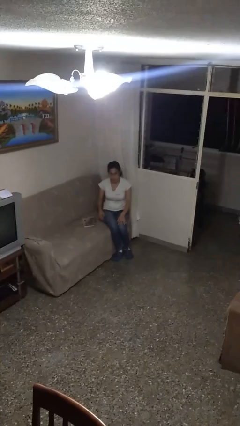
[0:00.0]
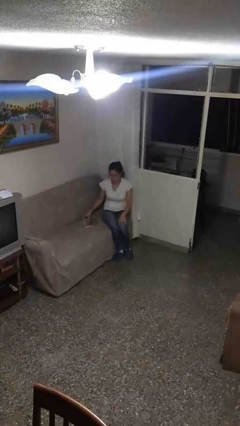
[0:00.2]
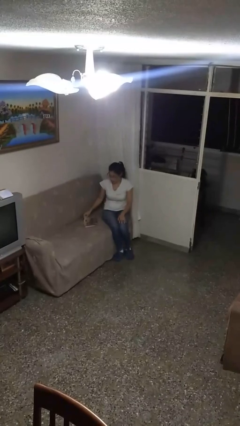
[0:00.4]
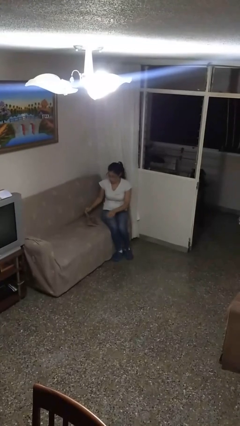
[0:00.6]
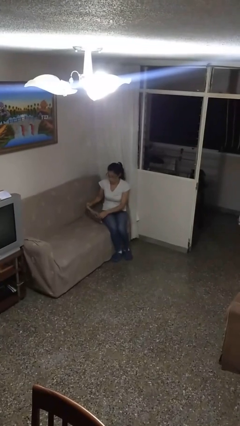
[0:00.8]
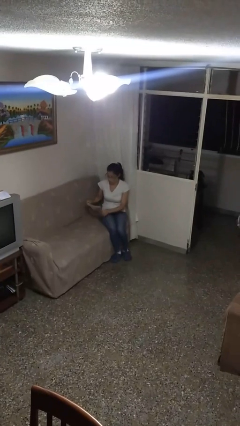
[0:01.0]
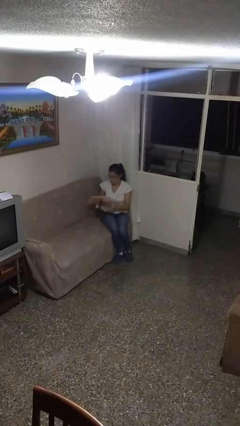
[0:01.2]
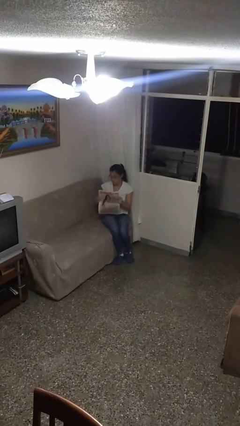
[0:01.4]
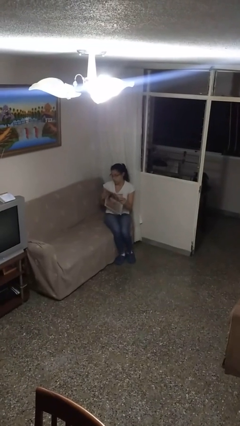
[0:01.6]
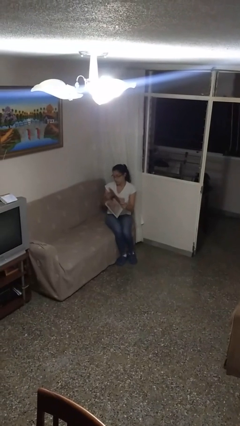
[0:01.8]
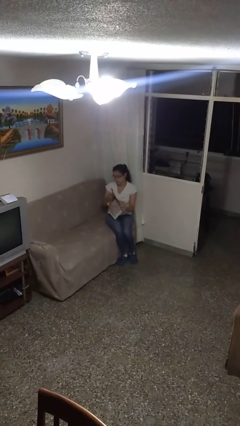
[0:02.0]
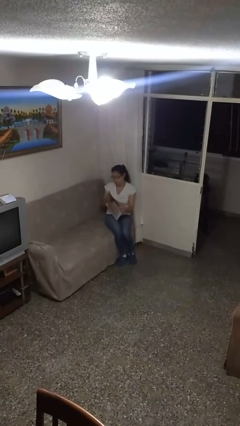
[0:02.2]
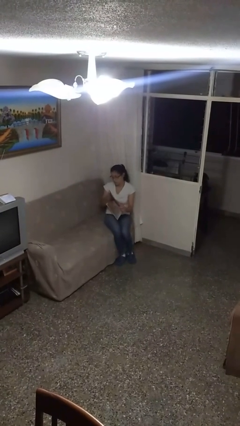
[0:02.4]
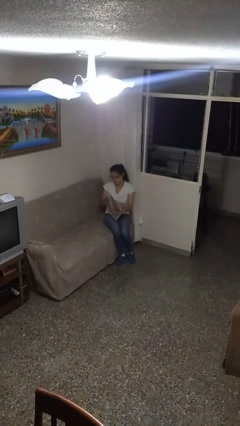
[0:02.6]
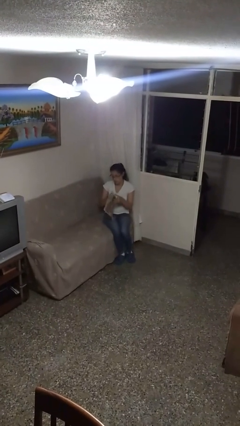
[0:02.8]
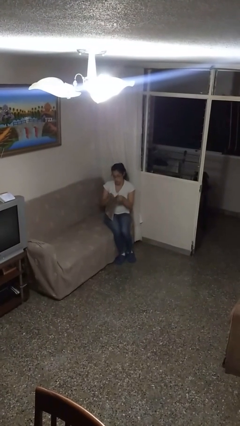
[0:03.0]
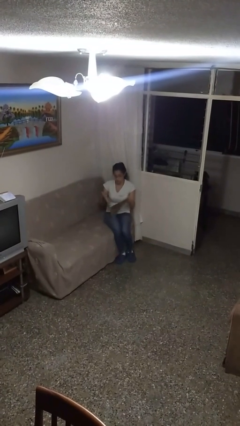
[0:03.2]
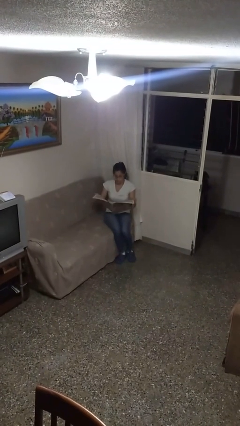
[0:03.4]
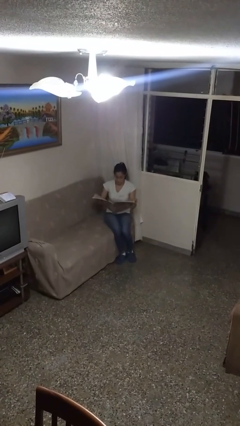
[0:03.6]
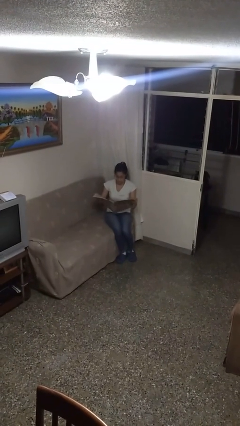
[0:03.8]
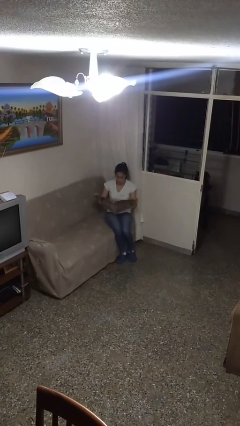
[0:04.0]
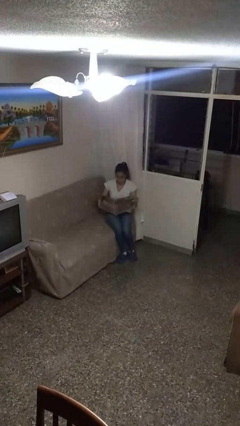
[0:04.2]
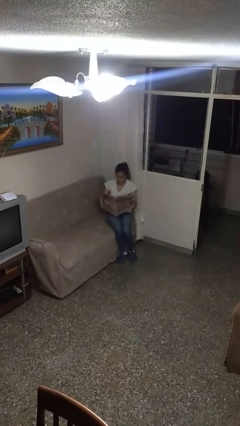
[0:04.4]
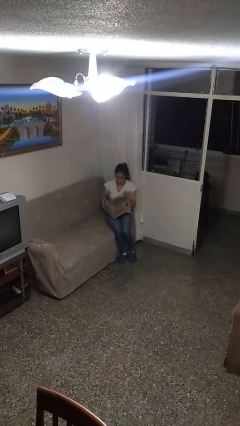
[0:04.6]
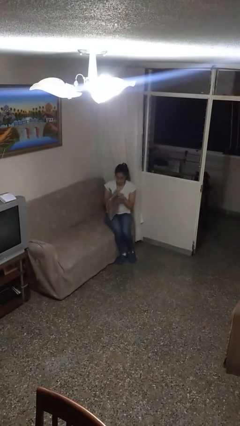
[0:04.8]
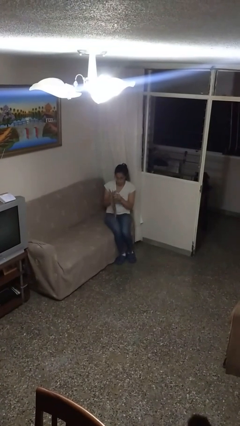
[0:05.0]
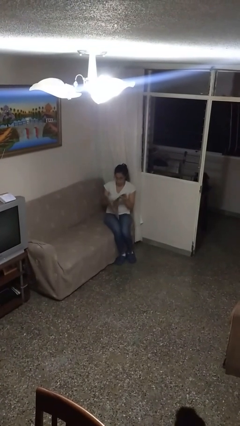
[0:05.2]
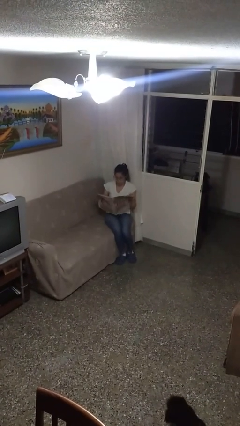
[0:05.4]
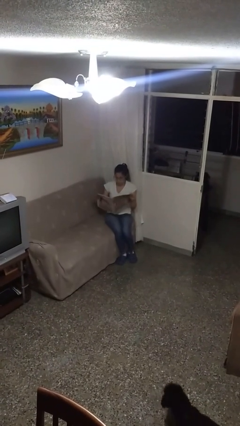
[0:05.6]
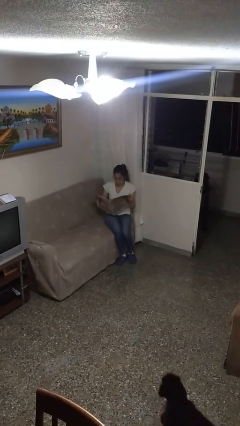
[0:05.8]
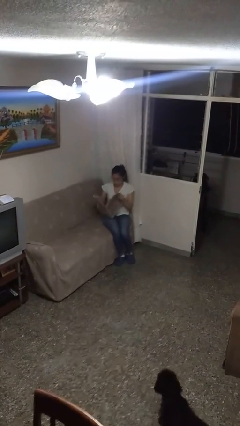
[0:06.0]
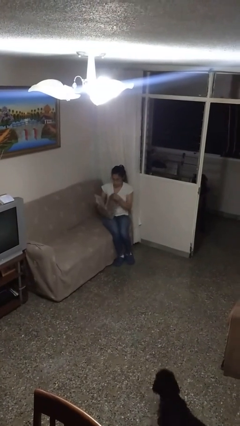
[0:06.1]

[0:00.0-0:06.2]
person reads newspaper

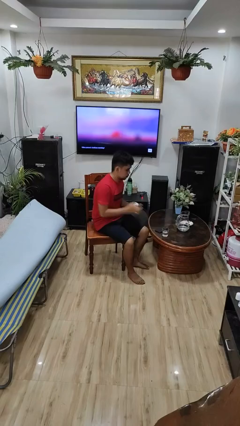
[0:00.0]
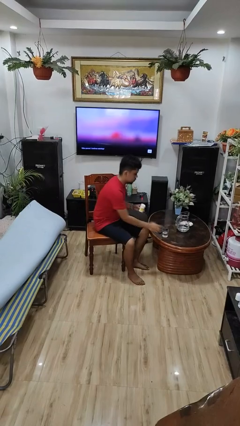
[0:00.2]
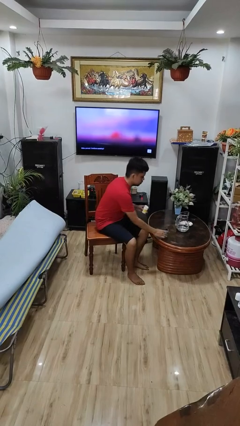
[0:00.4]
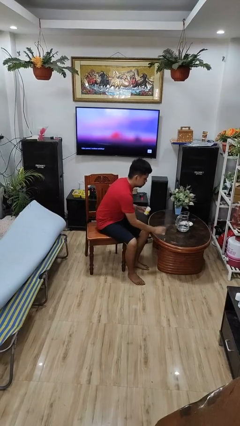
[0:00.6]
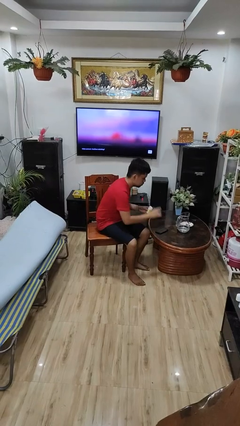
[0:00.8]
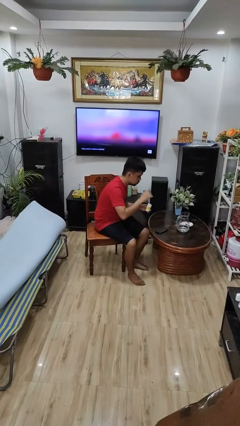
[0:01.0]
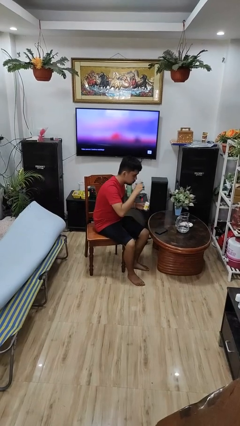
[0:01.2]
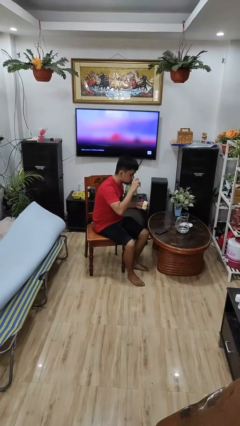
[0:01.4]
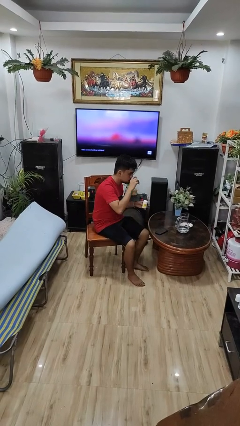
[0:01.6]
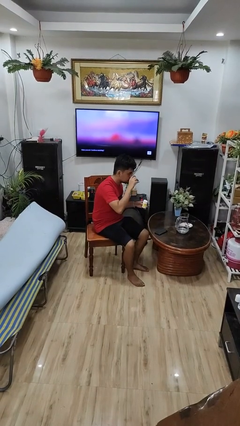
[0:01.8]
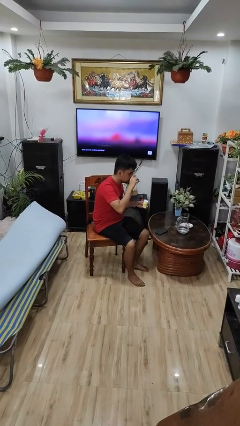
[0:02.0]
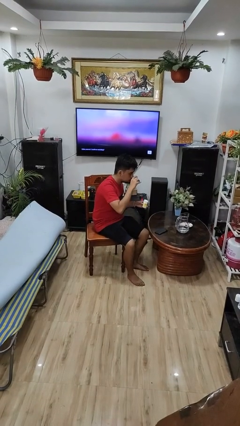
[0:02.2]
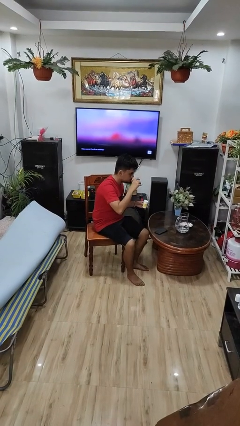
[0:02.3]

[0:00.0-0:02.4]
person drinks from cup

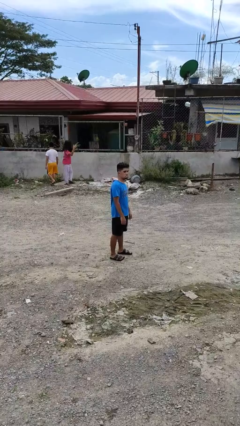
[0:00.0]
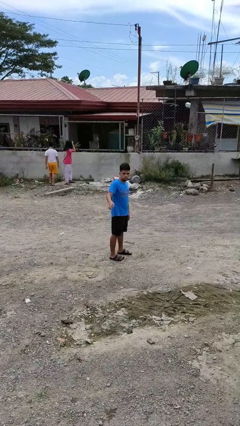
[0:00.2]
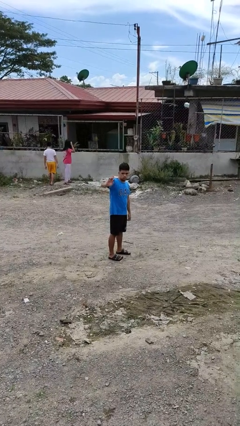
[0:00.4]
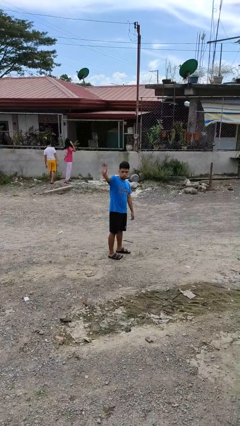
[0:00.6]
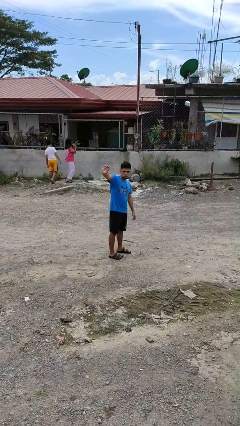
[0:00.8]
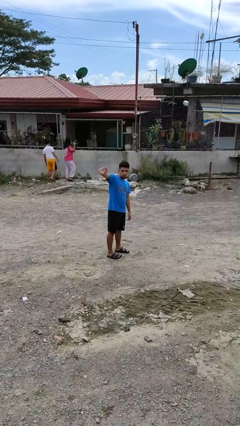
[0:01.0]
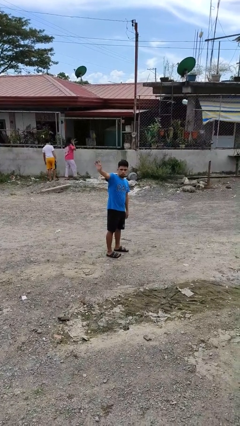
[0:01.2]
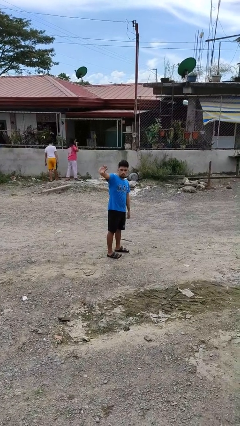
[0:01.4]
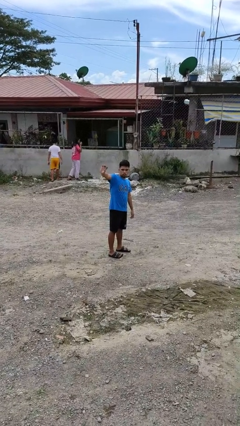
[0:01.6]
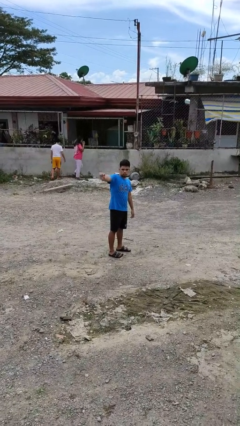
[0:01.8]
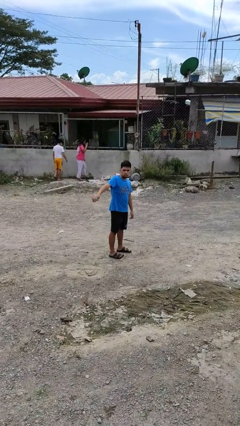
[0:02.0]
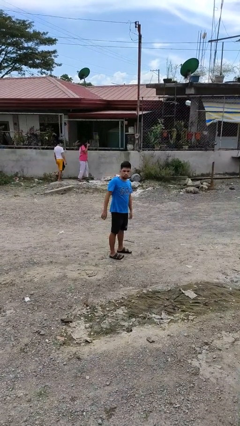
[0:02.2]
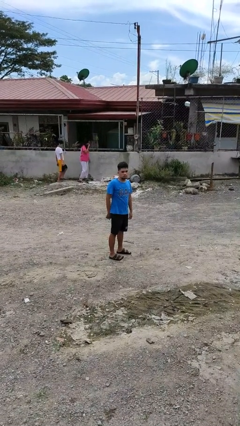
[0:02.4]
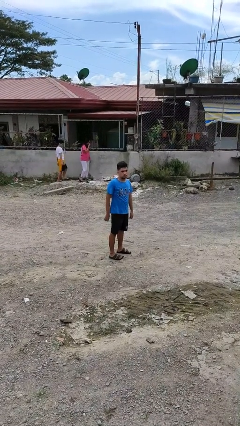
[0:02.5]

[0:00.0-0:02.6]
person waves at person

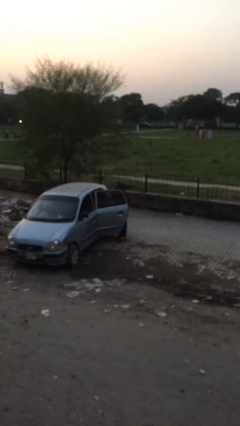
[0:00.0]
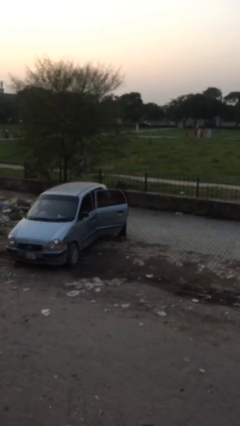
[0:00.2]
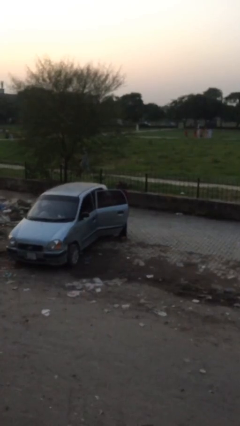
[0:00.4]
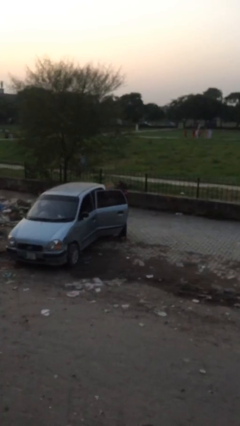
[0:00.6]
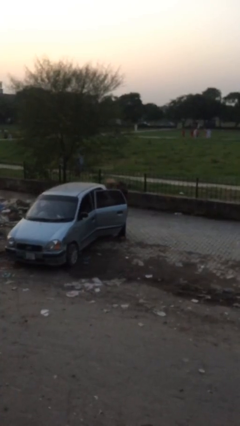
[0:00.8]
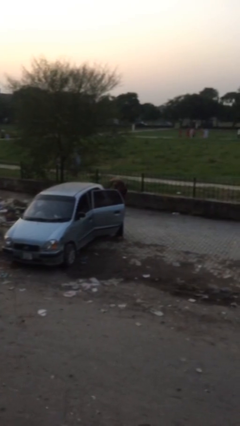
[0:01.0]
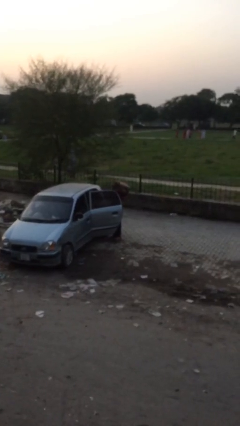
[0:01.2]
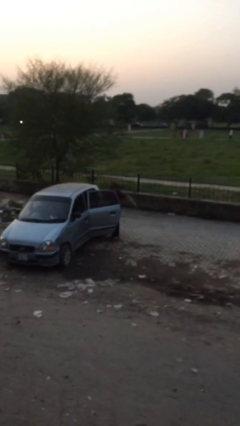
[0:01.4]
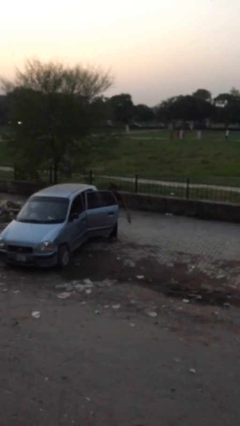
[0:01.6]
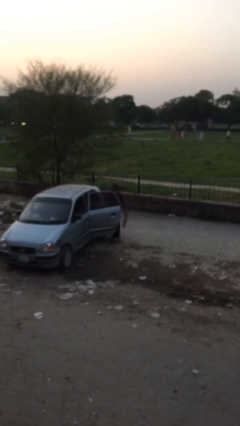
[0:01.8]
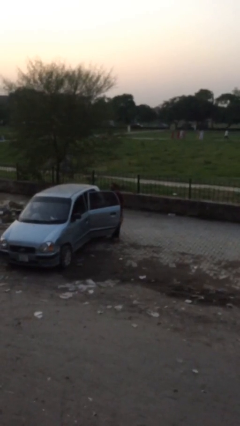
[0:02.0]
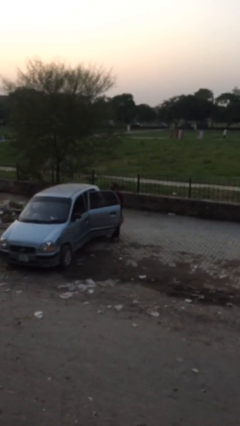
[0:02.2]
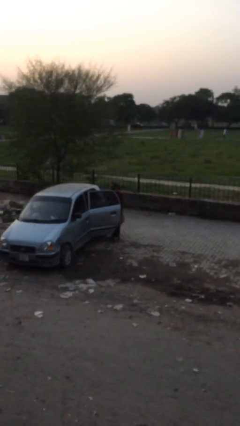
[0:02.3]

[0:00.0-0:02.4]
person unloads car

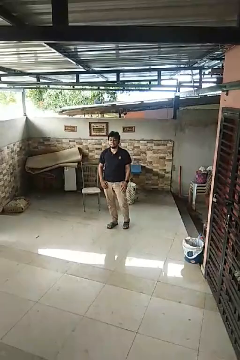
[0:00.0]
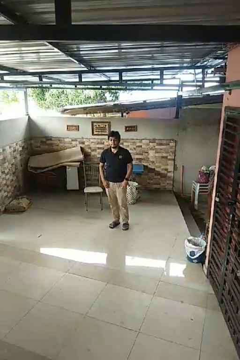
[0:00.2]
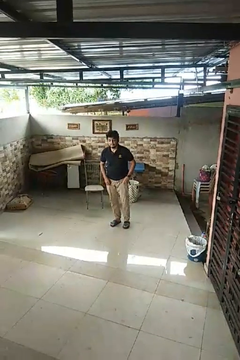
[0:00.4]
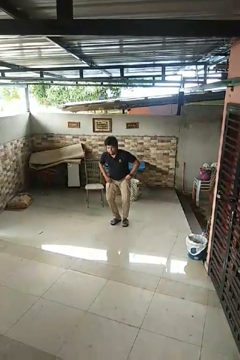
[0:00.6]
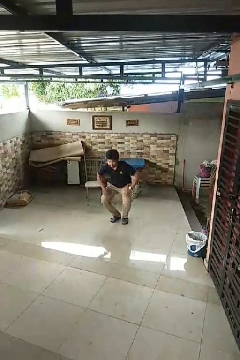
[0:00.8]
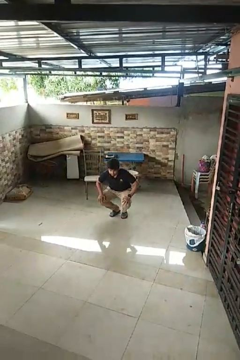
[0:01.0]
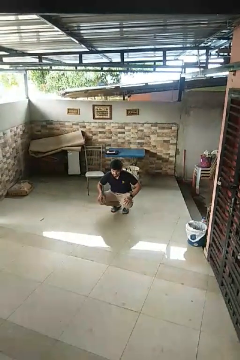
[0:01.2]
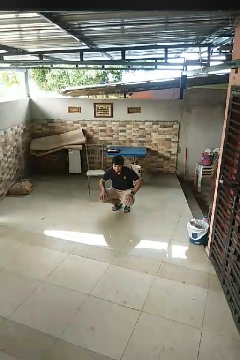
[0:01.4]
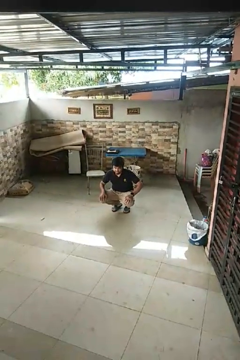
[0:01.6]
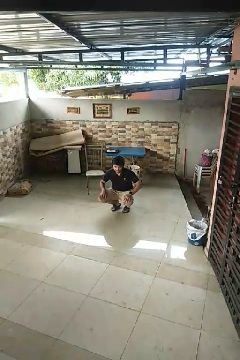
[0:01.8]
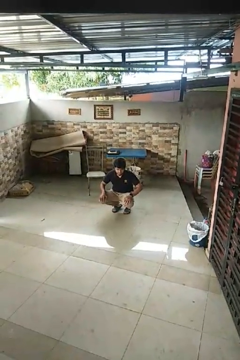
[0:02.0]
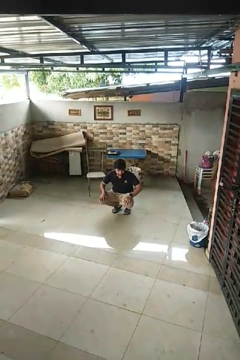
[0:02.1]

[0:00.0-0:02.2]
person squats

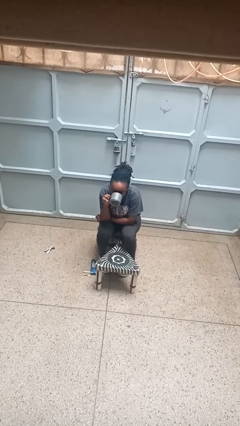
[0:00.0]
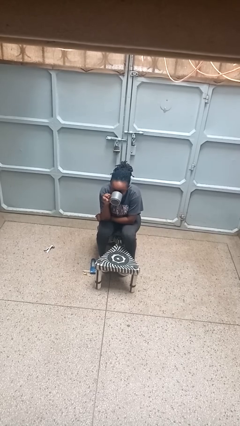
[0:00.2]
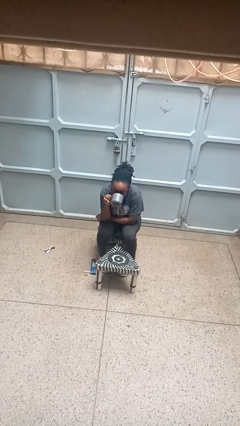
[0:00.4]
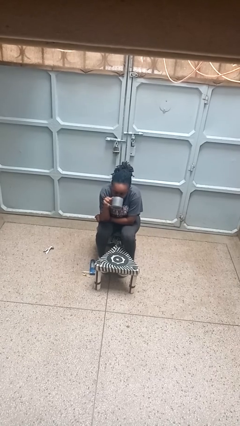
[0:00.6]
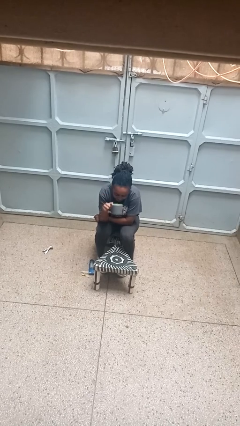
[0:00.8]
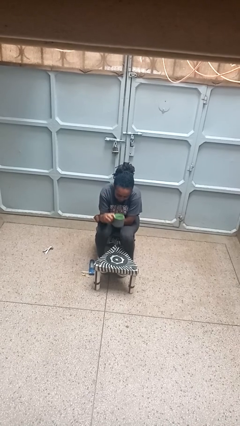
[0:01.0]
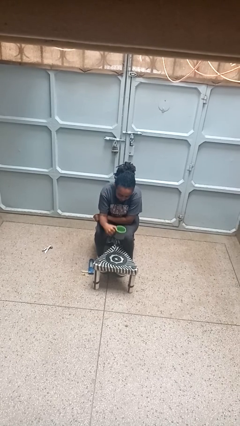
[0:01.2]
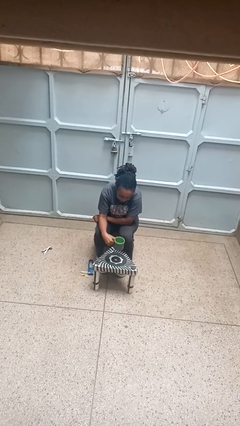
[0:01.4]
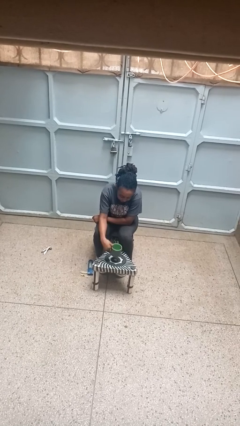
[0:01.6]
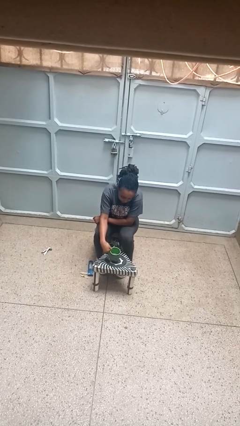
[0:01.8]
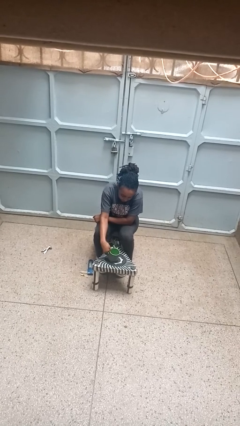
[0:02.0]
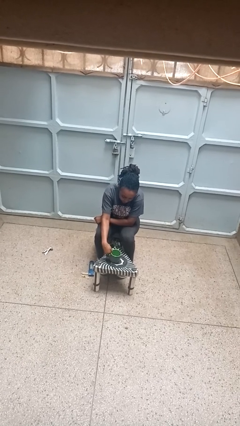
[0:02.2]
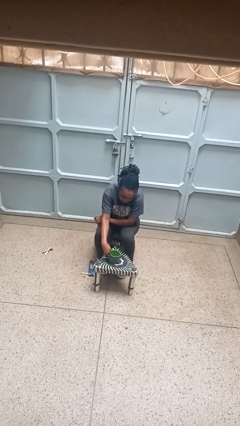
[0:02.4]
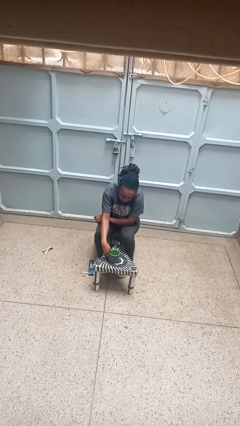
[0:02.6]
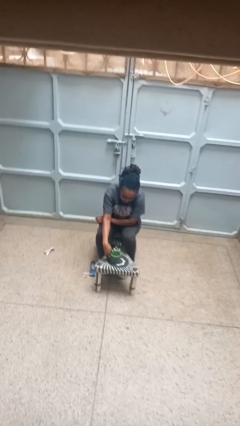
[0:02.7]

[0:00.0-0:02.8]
person puts down object on table
